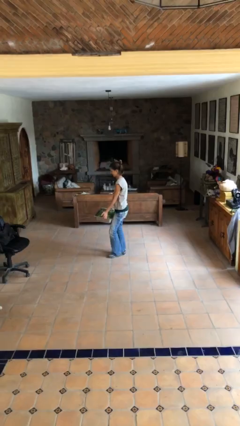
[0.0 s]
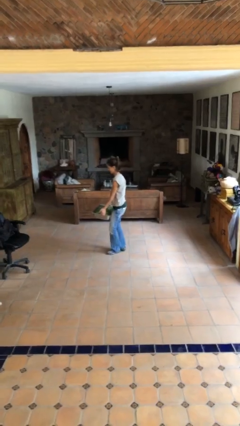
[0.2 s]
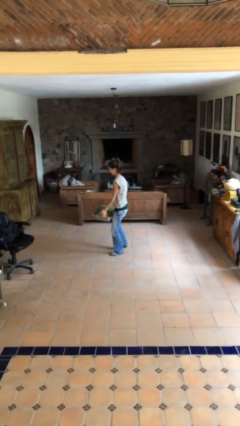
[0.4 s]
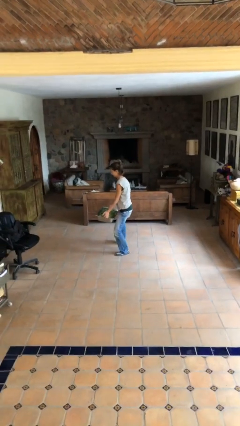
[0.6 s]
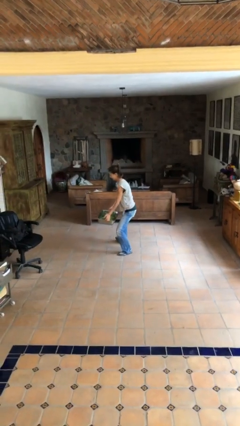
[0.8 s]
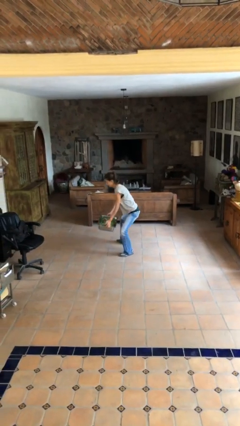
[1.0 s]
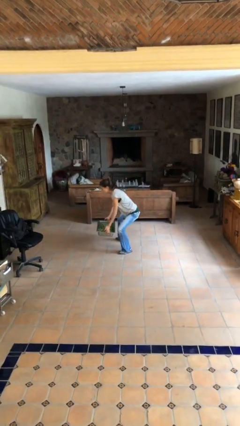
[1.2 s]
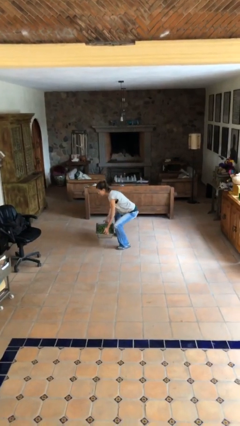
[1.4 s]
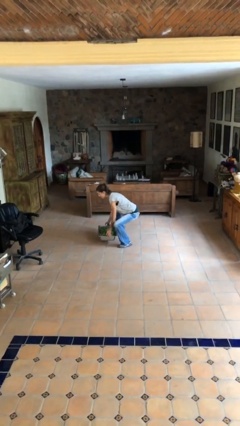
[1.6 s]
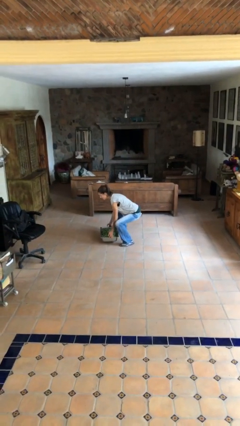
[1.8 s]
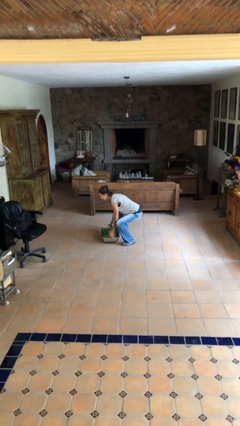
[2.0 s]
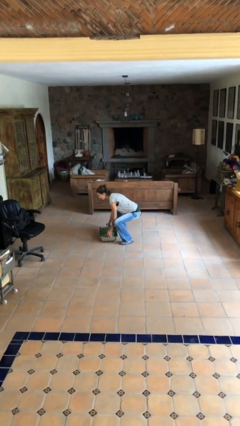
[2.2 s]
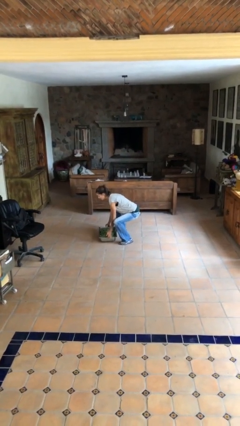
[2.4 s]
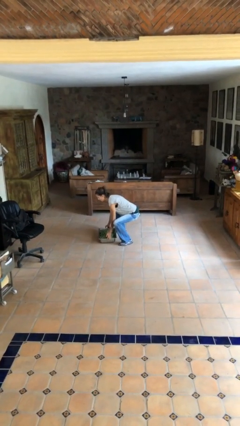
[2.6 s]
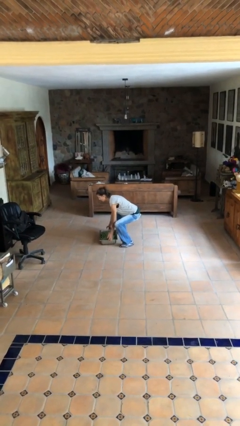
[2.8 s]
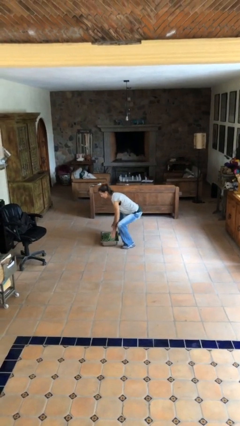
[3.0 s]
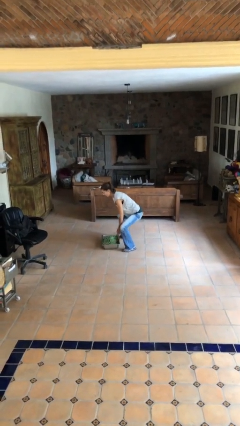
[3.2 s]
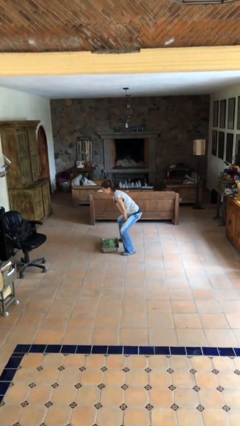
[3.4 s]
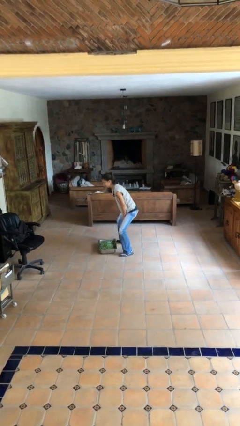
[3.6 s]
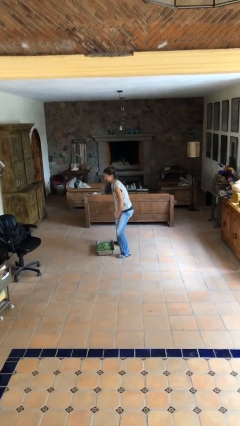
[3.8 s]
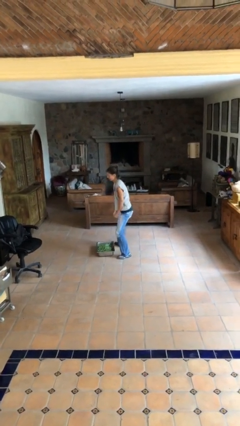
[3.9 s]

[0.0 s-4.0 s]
person puts down object on floor

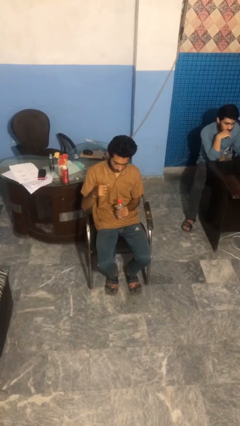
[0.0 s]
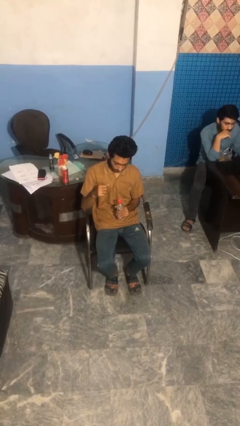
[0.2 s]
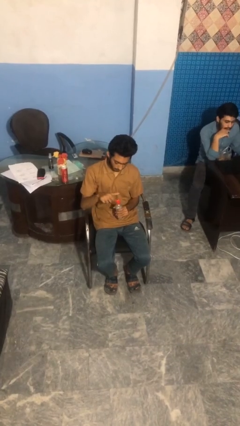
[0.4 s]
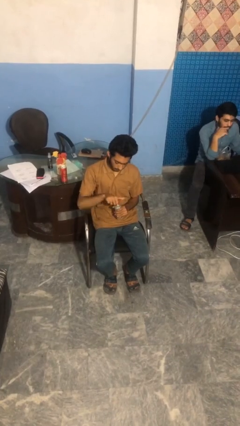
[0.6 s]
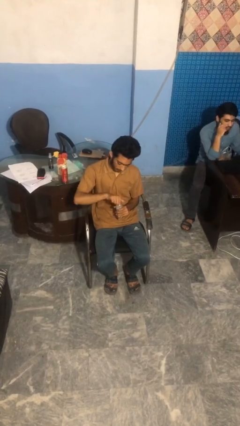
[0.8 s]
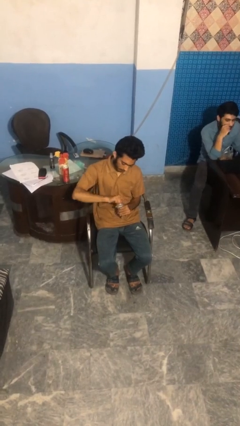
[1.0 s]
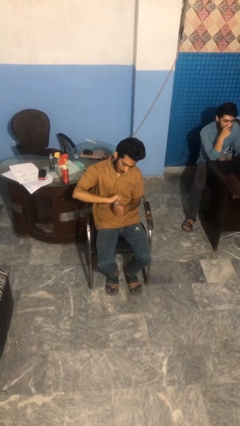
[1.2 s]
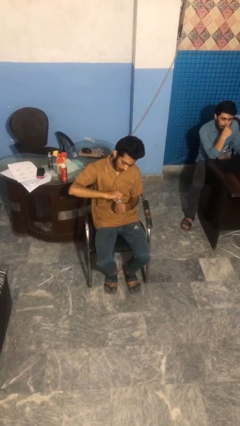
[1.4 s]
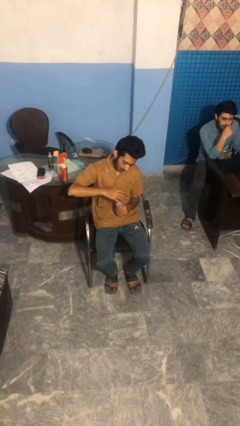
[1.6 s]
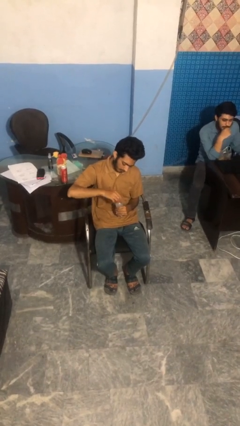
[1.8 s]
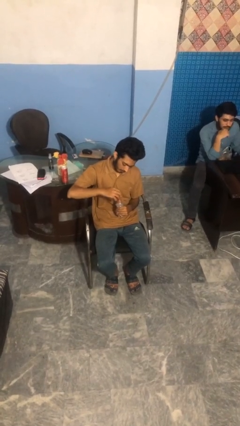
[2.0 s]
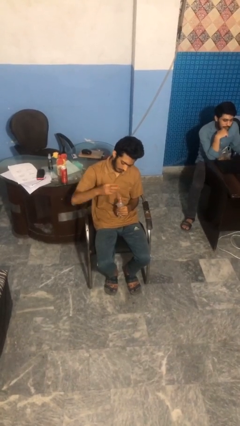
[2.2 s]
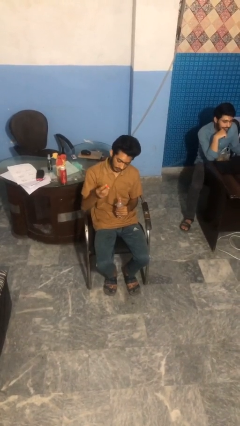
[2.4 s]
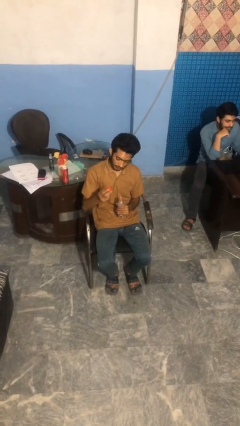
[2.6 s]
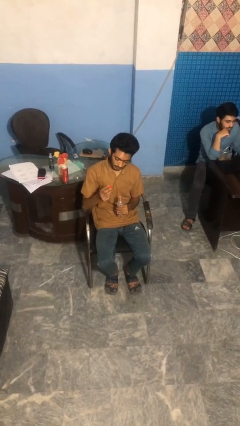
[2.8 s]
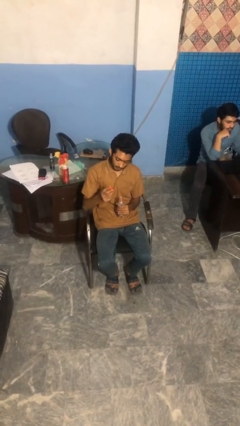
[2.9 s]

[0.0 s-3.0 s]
person unscrews lid from bottle

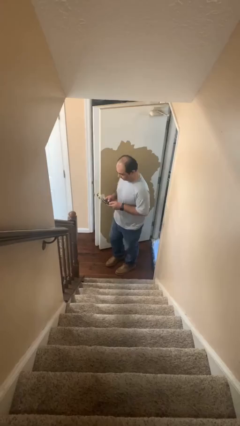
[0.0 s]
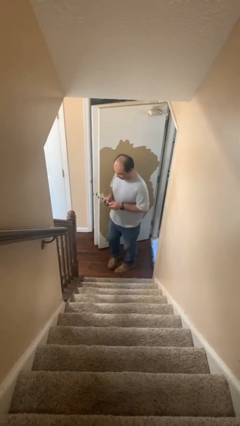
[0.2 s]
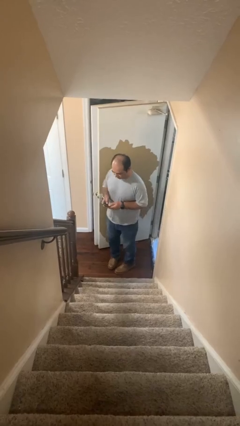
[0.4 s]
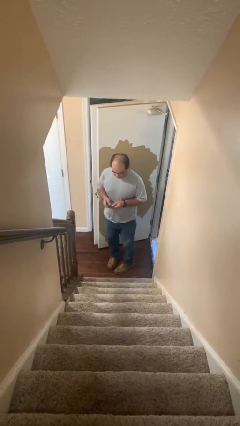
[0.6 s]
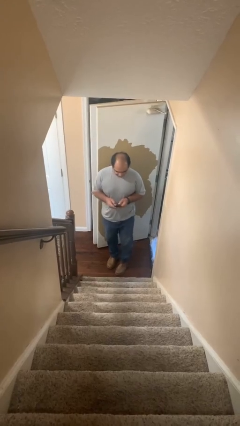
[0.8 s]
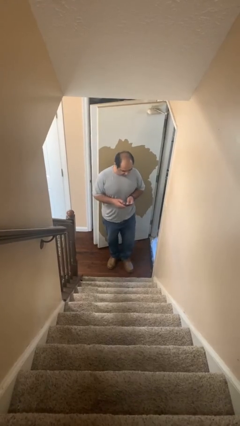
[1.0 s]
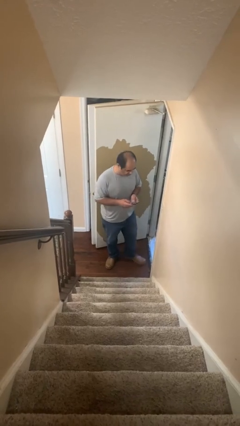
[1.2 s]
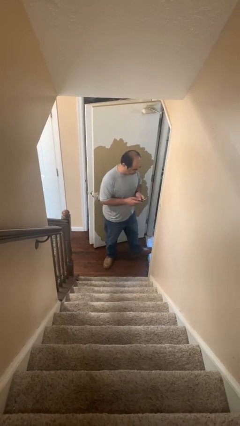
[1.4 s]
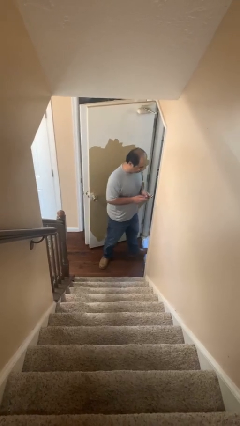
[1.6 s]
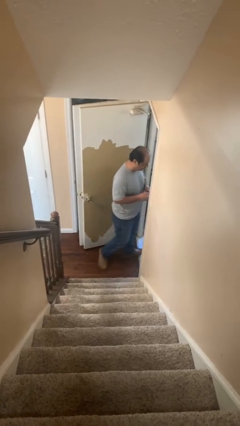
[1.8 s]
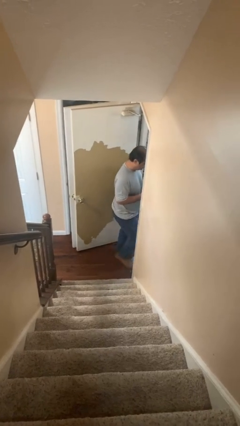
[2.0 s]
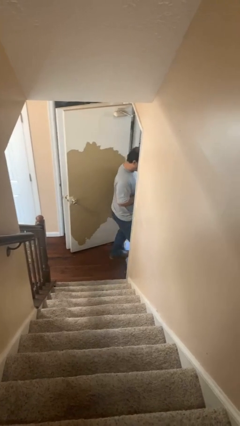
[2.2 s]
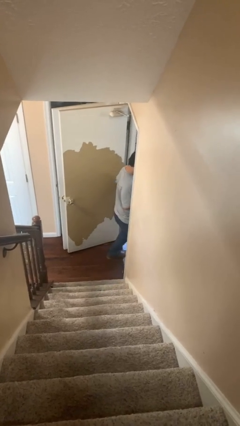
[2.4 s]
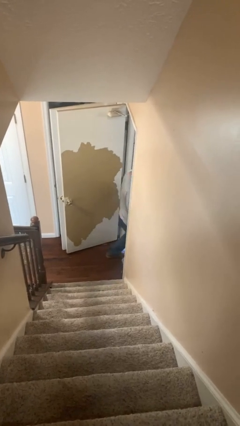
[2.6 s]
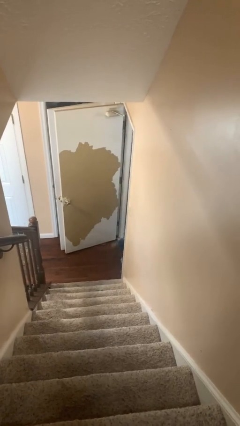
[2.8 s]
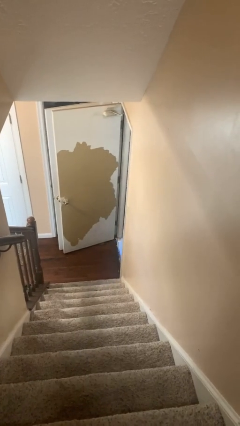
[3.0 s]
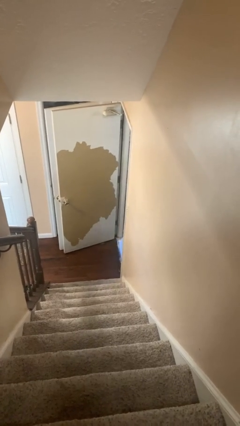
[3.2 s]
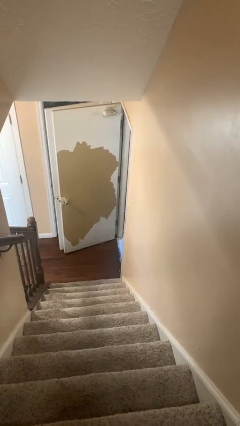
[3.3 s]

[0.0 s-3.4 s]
person exits scene through structure

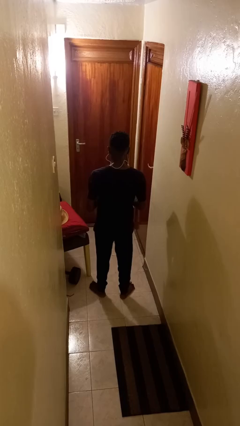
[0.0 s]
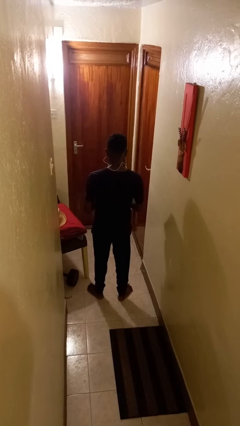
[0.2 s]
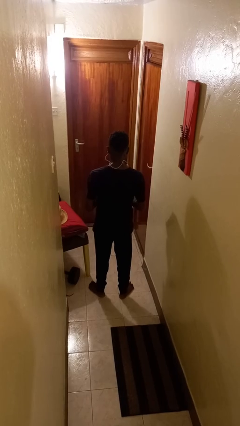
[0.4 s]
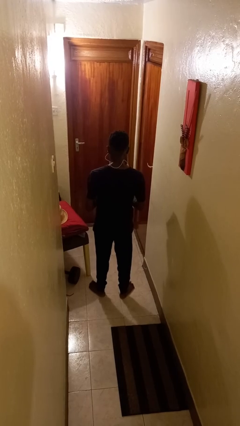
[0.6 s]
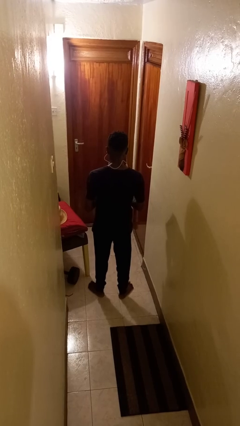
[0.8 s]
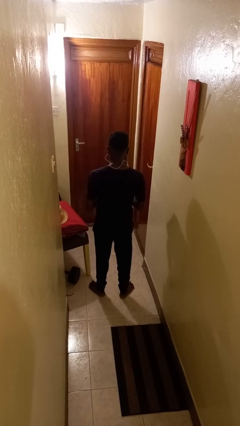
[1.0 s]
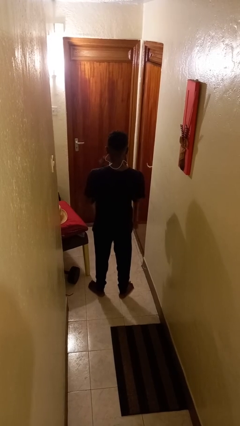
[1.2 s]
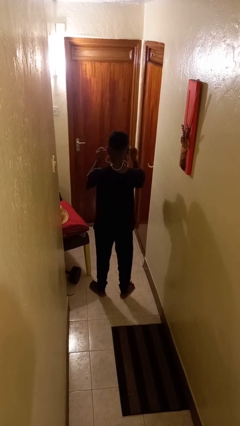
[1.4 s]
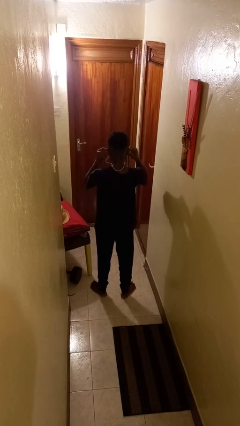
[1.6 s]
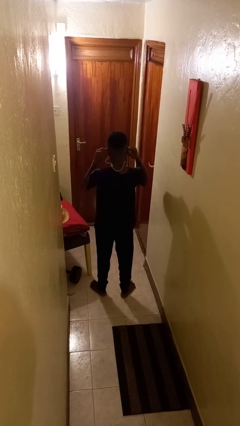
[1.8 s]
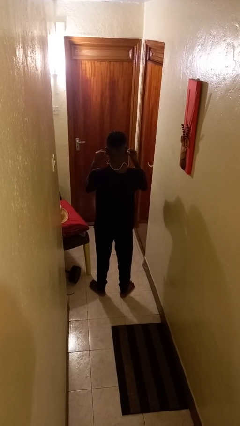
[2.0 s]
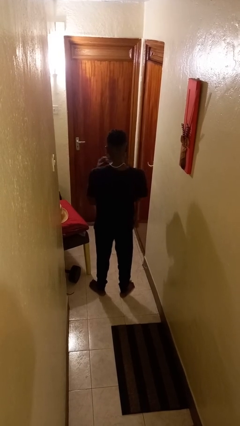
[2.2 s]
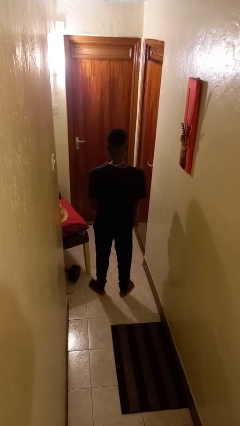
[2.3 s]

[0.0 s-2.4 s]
person takes off headphones

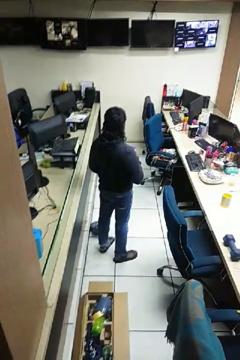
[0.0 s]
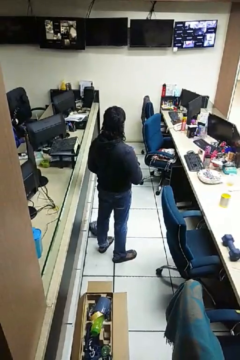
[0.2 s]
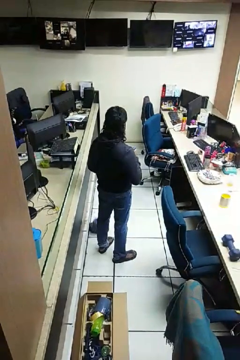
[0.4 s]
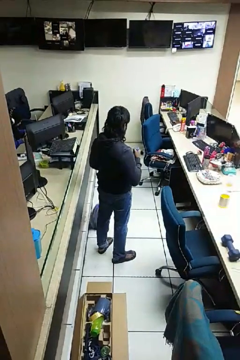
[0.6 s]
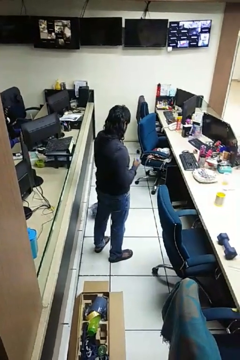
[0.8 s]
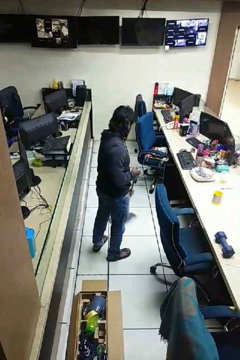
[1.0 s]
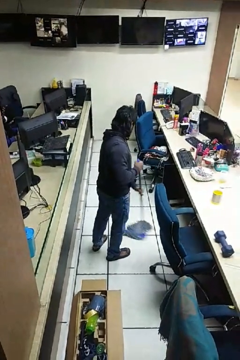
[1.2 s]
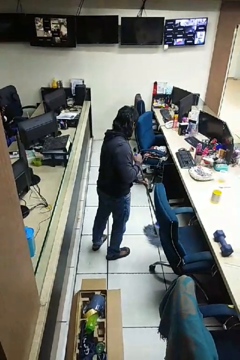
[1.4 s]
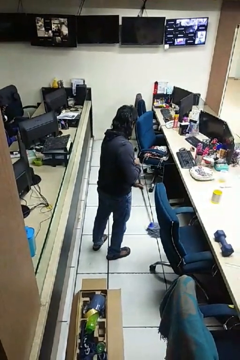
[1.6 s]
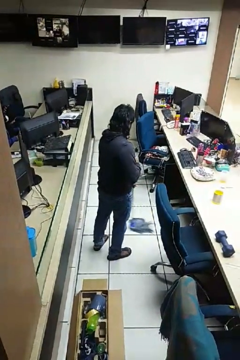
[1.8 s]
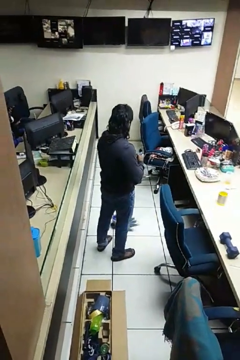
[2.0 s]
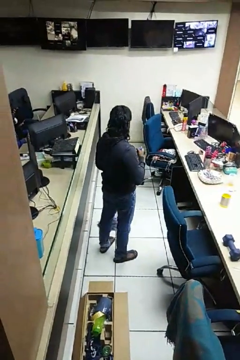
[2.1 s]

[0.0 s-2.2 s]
person mops

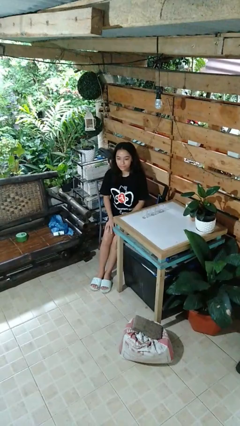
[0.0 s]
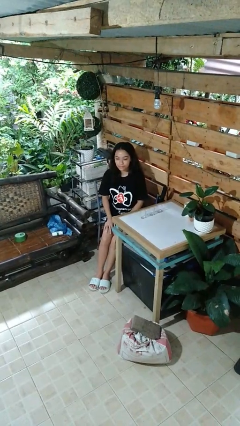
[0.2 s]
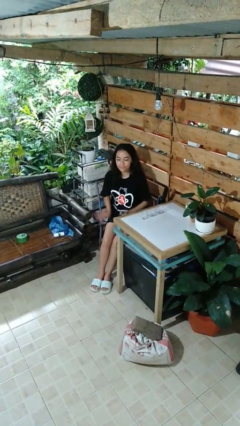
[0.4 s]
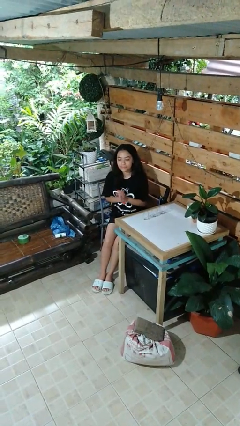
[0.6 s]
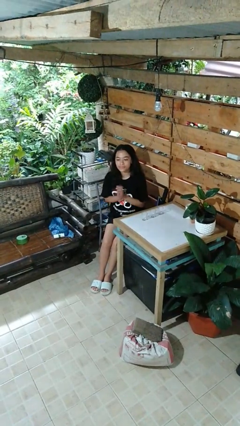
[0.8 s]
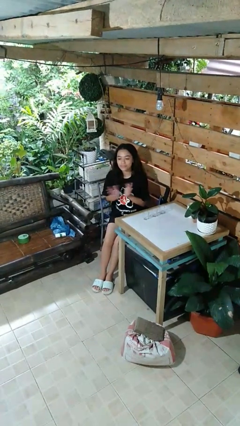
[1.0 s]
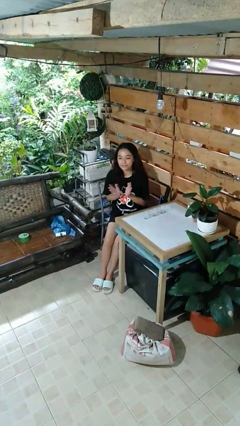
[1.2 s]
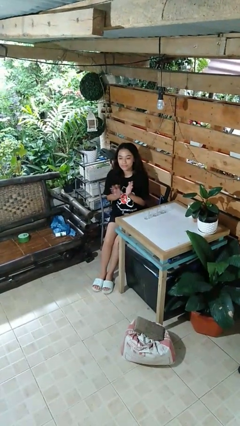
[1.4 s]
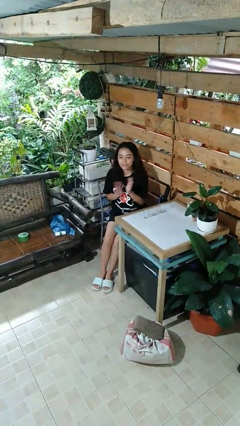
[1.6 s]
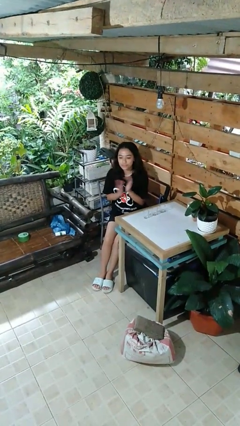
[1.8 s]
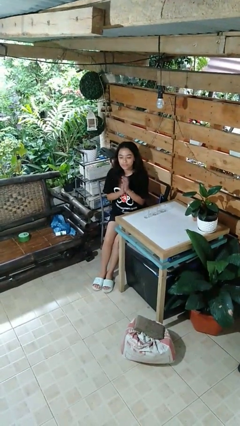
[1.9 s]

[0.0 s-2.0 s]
person claps hands

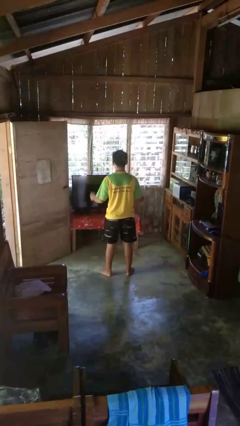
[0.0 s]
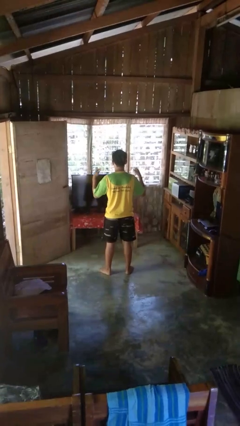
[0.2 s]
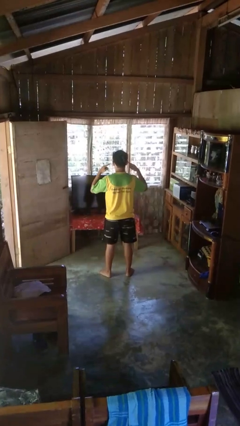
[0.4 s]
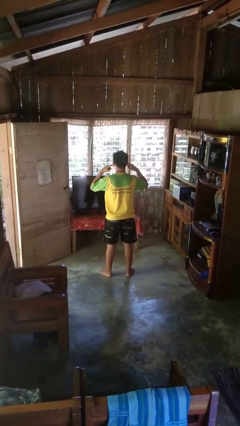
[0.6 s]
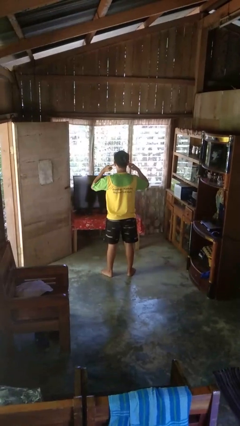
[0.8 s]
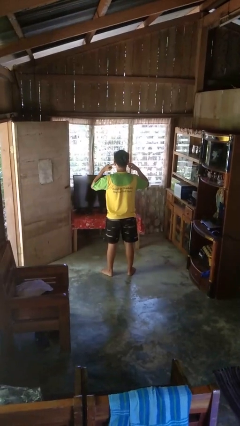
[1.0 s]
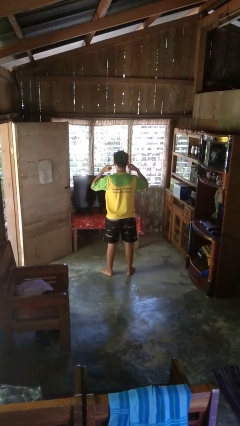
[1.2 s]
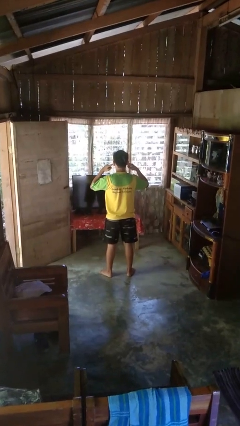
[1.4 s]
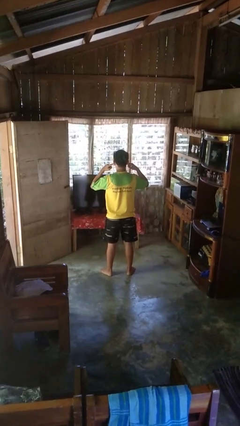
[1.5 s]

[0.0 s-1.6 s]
person puts fingers in ear
